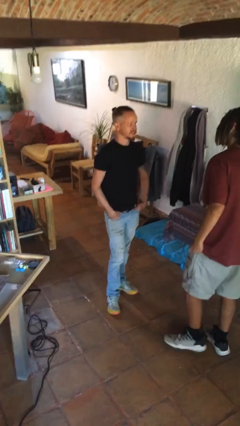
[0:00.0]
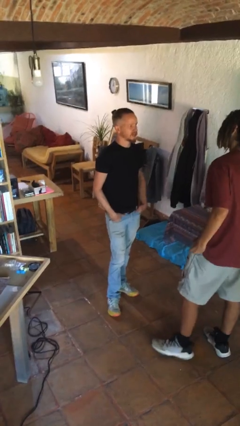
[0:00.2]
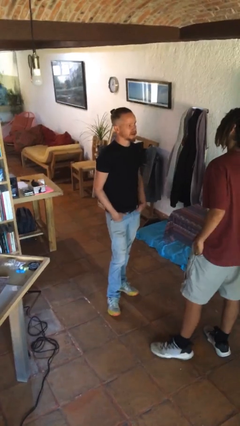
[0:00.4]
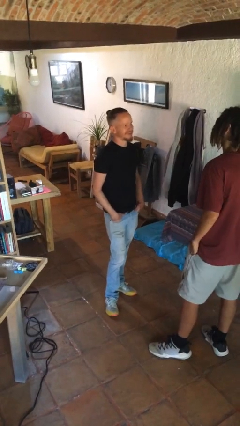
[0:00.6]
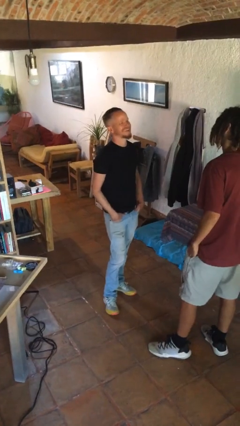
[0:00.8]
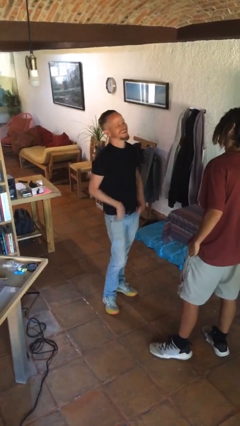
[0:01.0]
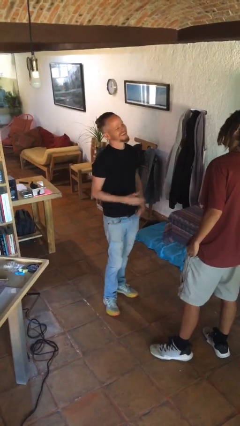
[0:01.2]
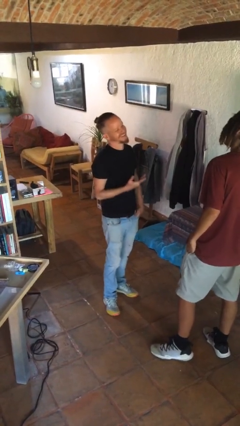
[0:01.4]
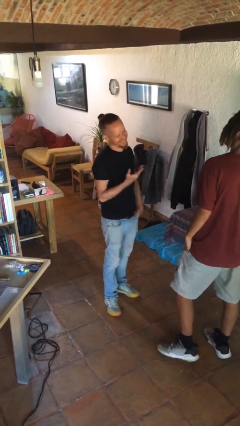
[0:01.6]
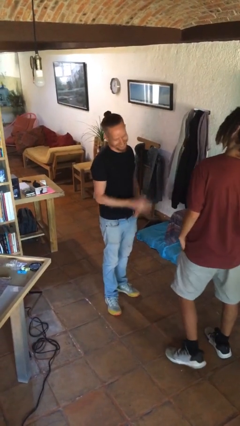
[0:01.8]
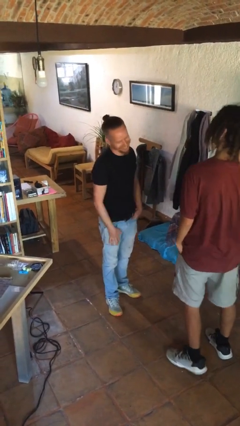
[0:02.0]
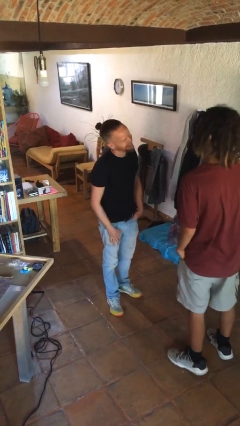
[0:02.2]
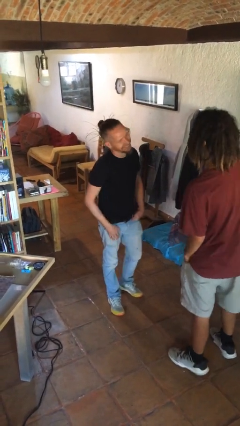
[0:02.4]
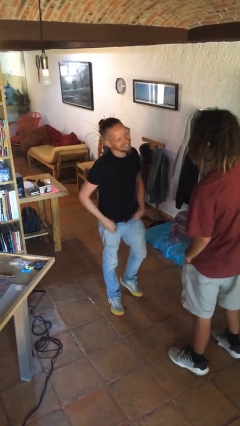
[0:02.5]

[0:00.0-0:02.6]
person laughs with person

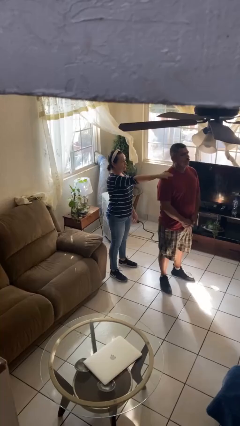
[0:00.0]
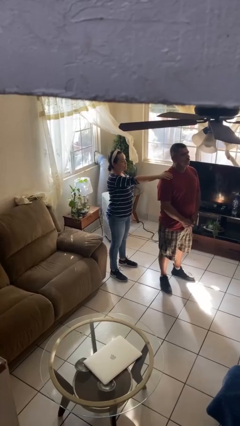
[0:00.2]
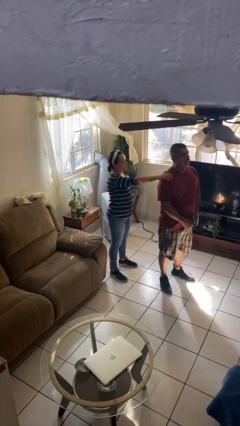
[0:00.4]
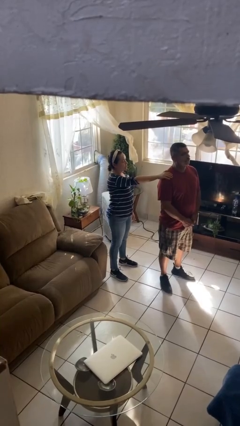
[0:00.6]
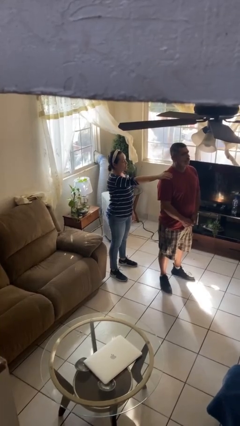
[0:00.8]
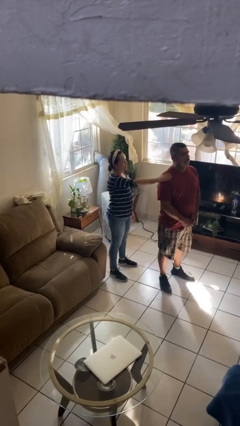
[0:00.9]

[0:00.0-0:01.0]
person grabs person by shoulder

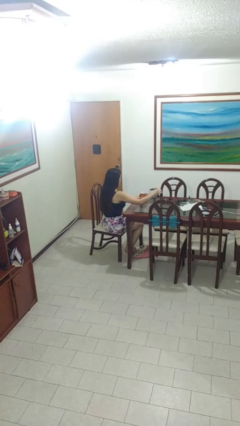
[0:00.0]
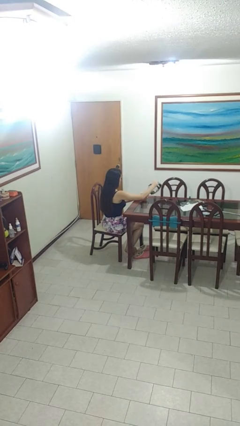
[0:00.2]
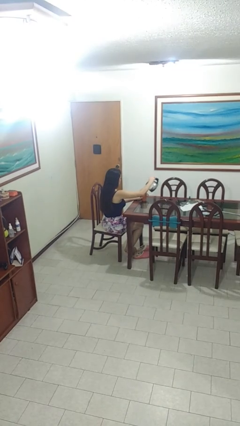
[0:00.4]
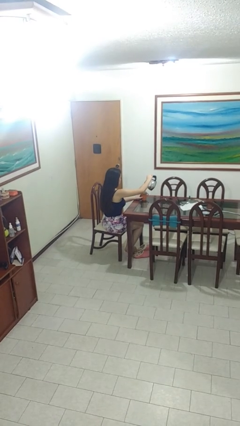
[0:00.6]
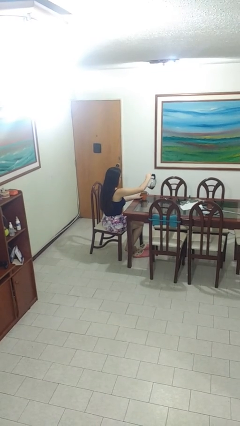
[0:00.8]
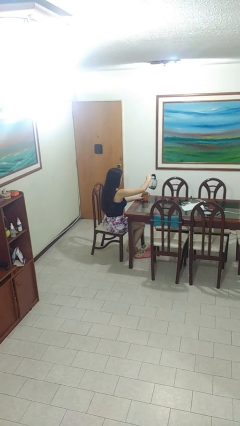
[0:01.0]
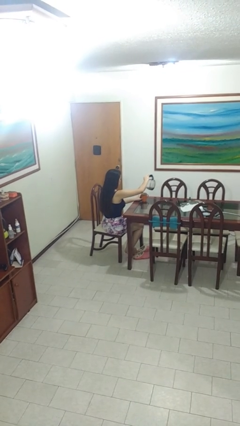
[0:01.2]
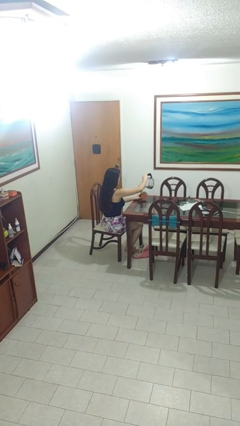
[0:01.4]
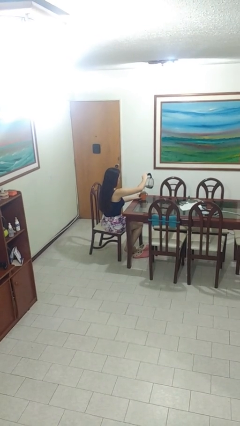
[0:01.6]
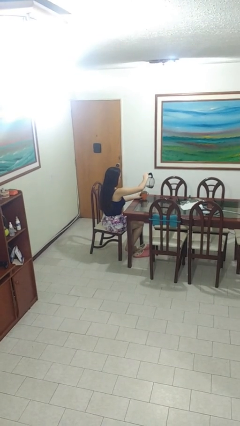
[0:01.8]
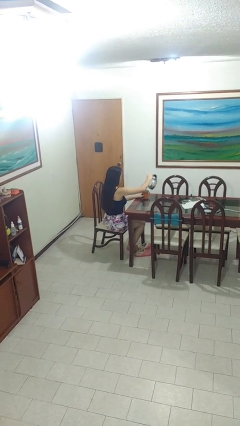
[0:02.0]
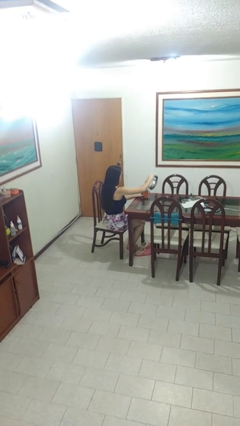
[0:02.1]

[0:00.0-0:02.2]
person pours coffee into mug

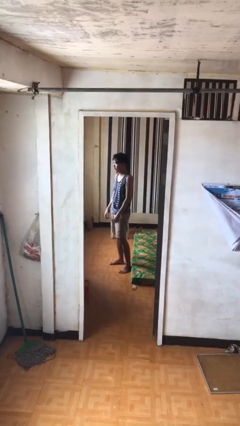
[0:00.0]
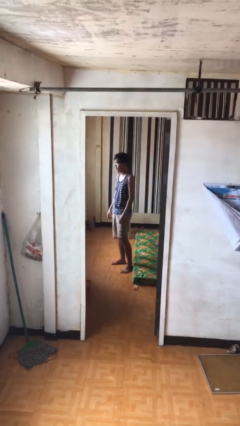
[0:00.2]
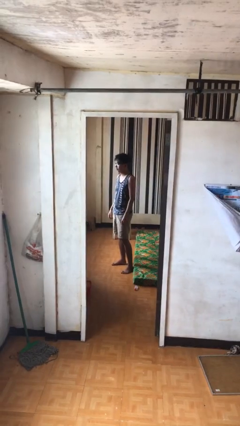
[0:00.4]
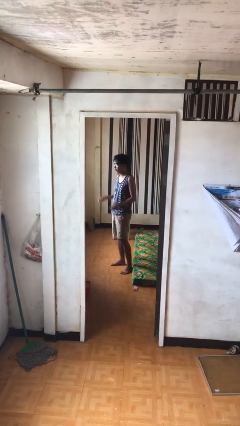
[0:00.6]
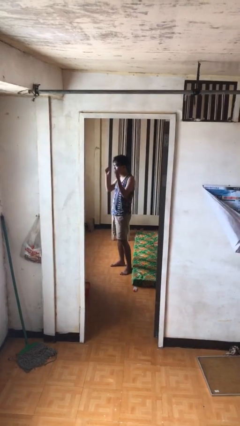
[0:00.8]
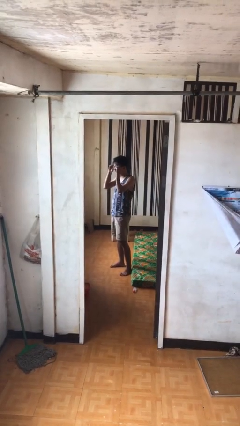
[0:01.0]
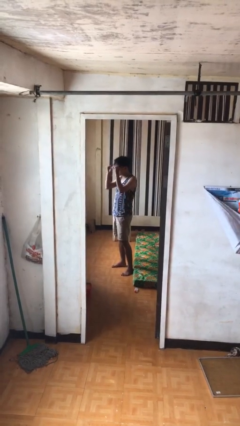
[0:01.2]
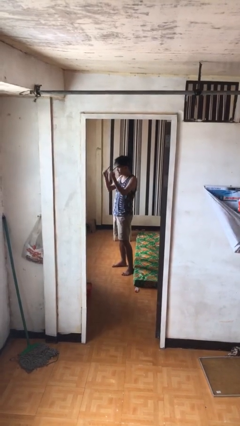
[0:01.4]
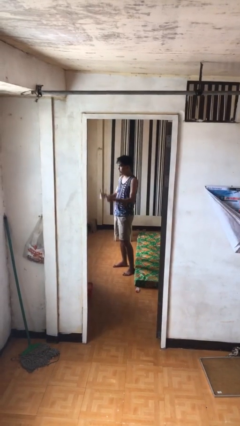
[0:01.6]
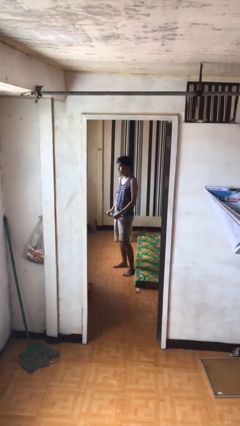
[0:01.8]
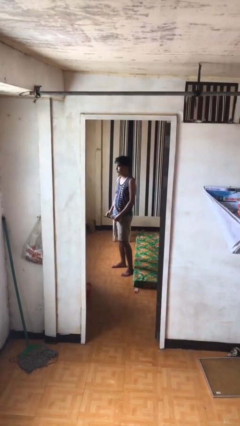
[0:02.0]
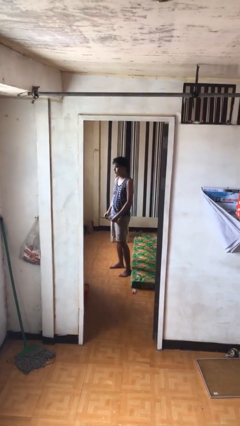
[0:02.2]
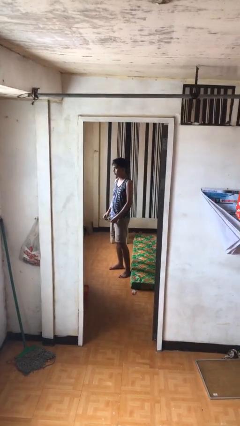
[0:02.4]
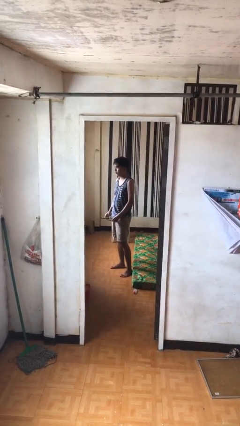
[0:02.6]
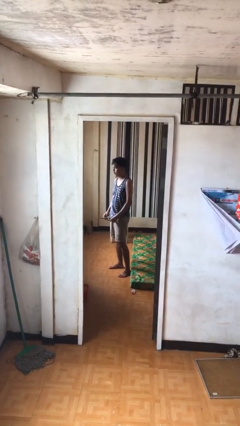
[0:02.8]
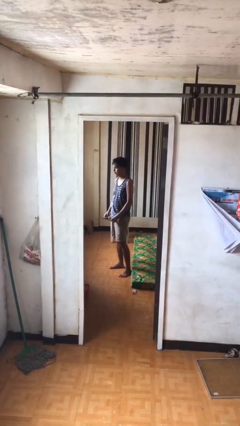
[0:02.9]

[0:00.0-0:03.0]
person takes off glasses

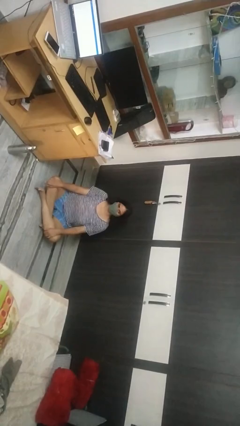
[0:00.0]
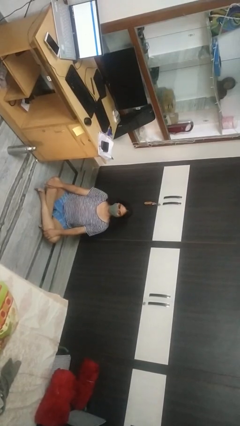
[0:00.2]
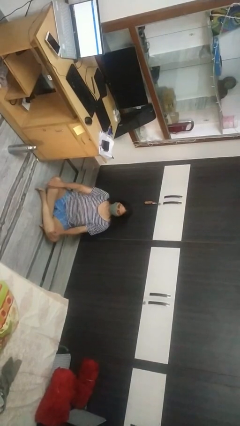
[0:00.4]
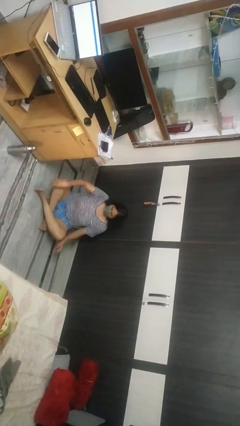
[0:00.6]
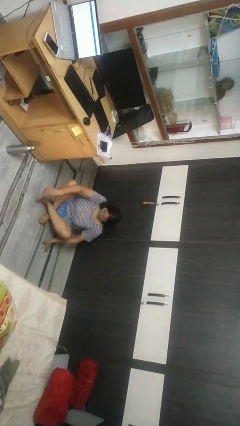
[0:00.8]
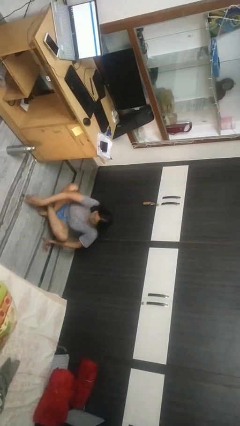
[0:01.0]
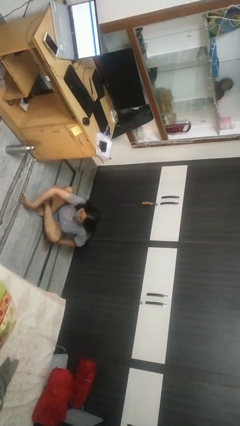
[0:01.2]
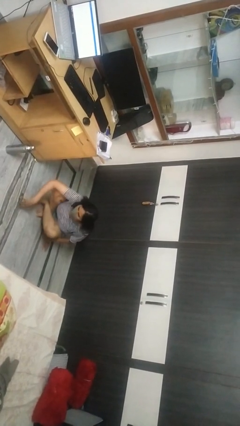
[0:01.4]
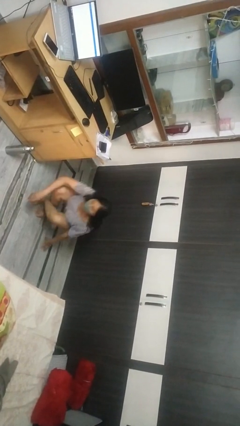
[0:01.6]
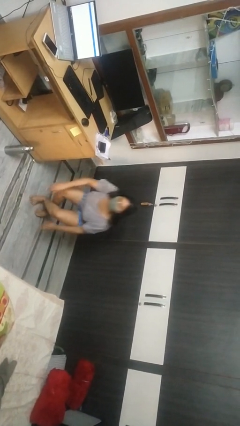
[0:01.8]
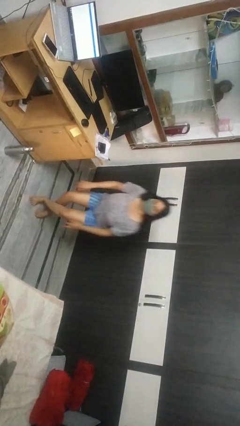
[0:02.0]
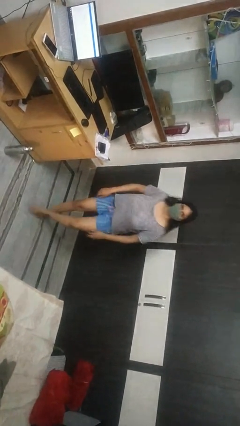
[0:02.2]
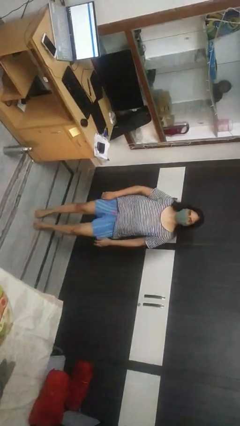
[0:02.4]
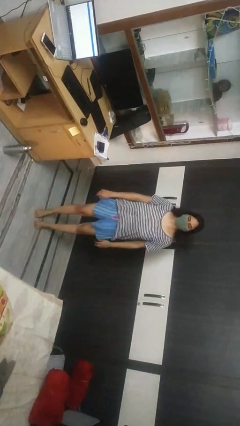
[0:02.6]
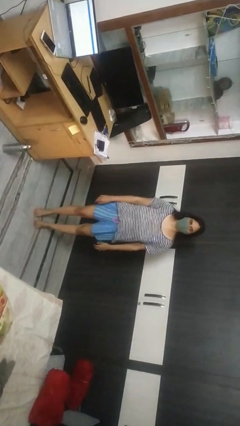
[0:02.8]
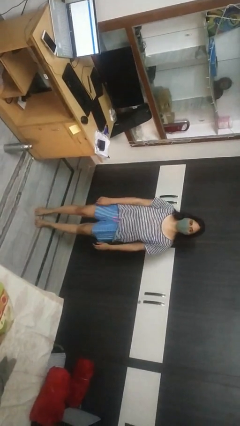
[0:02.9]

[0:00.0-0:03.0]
person stands up from floor

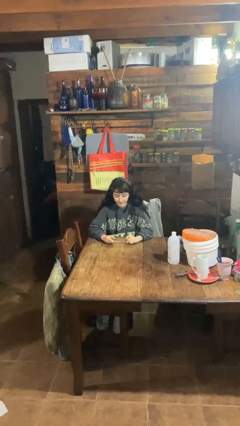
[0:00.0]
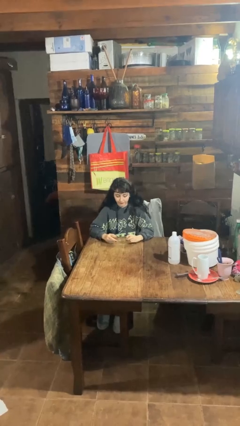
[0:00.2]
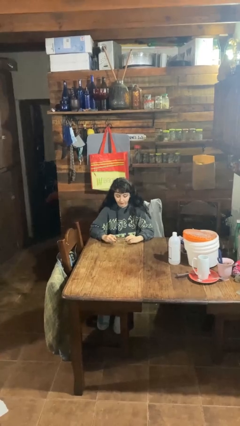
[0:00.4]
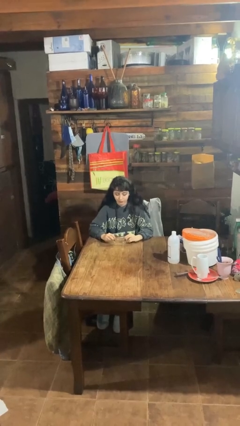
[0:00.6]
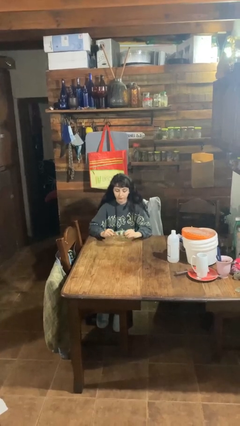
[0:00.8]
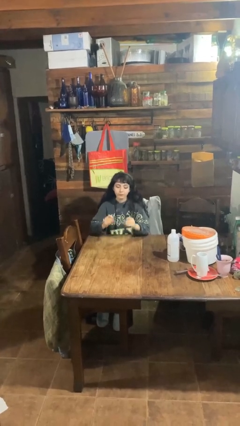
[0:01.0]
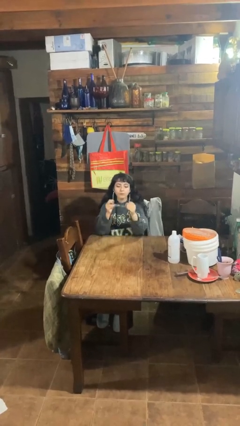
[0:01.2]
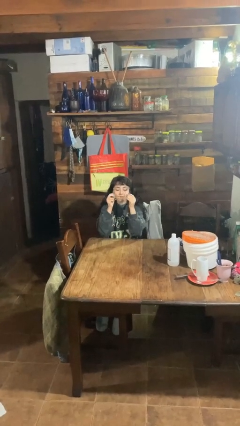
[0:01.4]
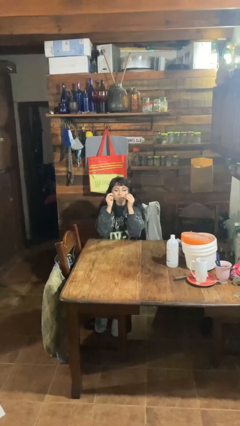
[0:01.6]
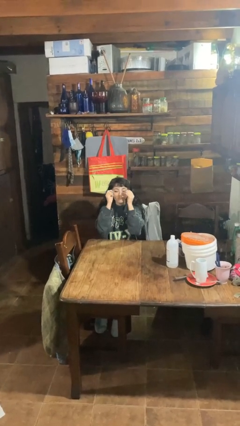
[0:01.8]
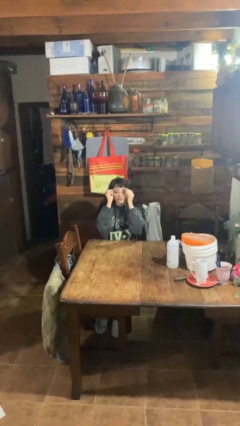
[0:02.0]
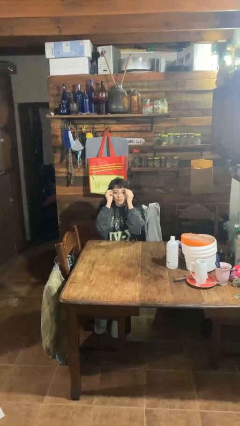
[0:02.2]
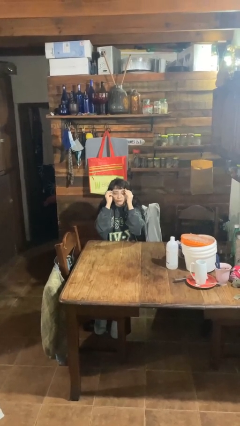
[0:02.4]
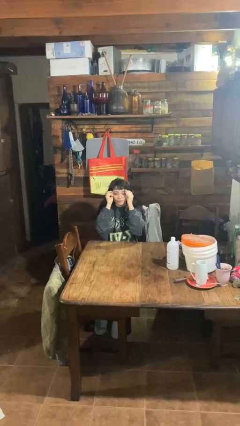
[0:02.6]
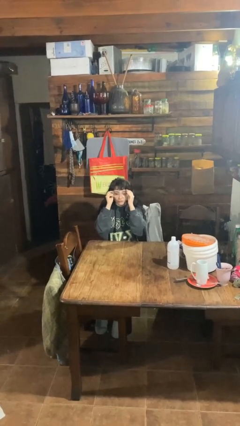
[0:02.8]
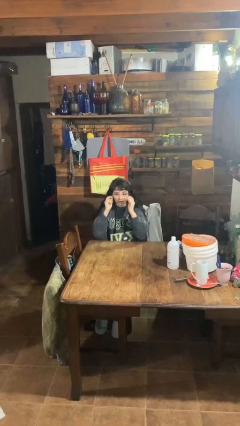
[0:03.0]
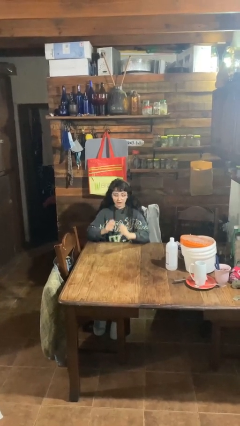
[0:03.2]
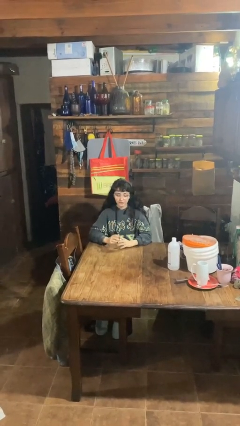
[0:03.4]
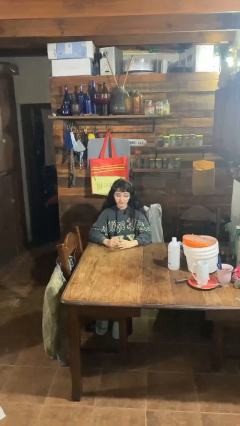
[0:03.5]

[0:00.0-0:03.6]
person puts on glasses

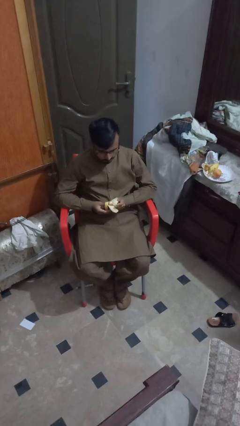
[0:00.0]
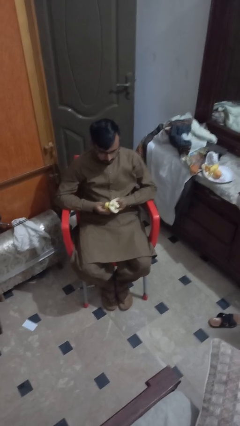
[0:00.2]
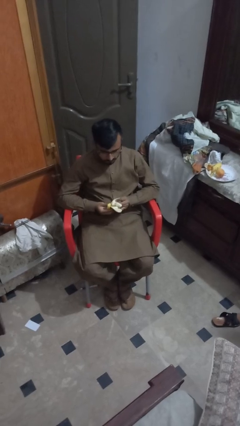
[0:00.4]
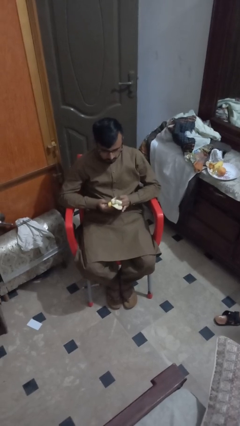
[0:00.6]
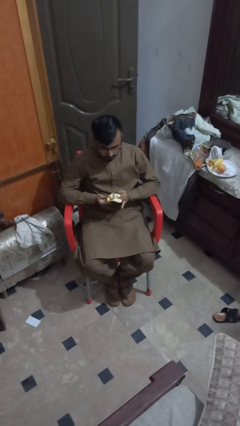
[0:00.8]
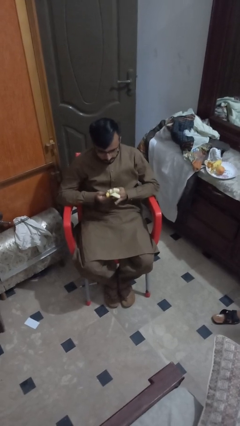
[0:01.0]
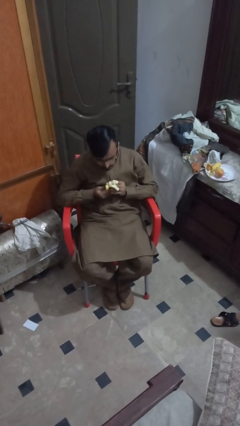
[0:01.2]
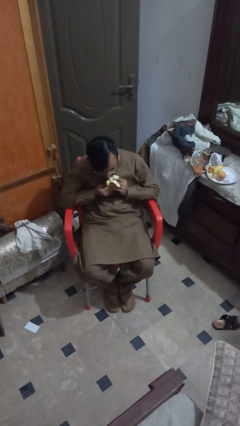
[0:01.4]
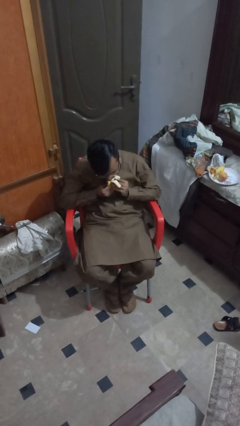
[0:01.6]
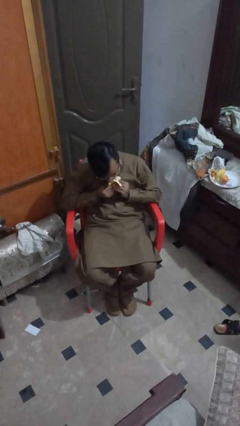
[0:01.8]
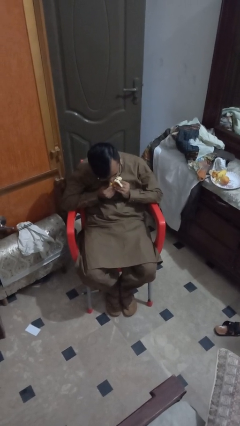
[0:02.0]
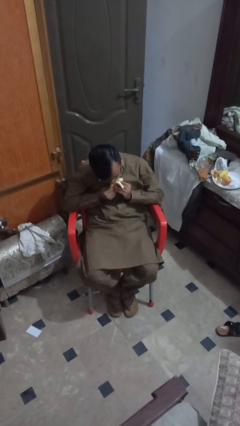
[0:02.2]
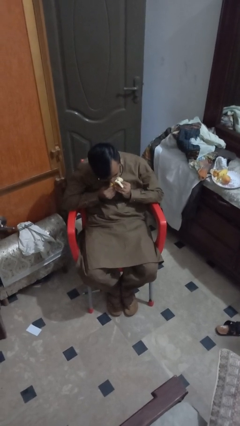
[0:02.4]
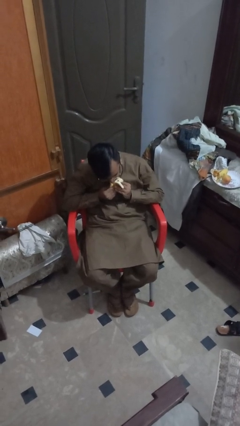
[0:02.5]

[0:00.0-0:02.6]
person eats banana
